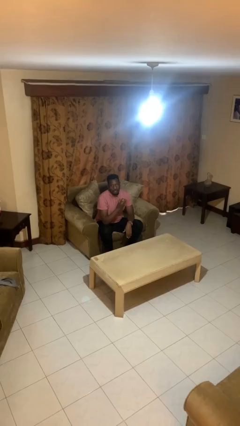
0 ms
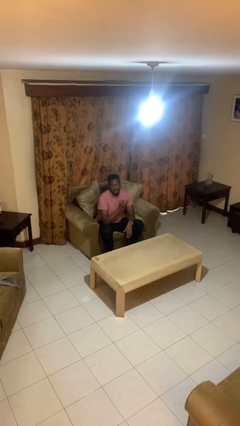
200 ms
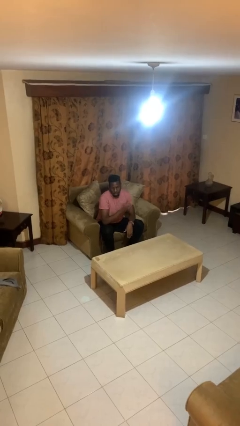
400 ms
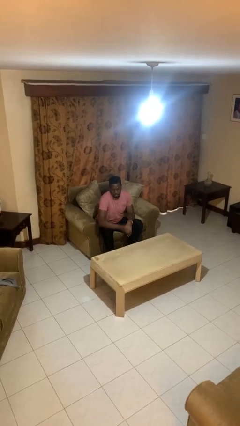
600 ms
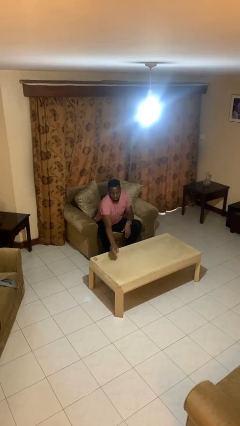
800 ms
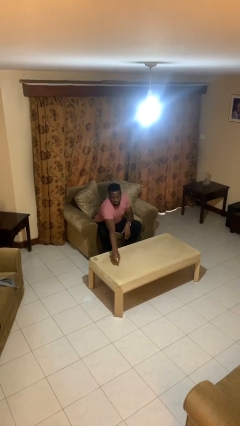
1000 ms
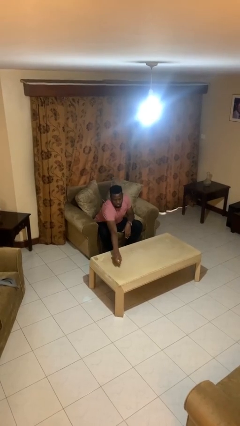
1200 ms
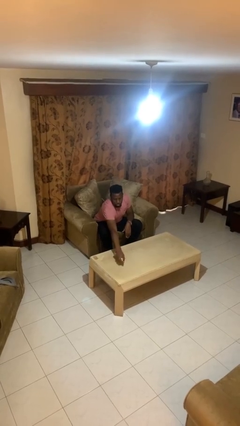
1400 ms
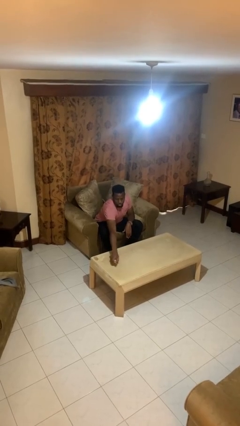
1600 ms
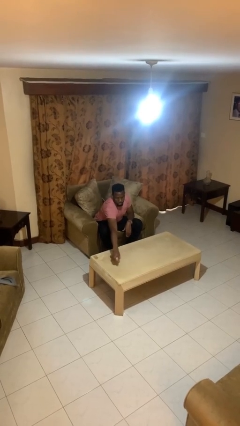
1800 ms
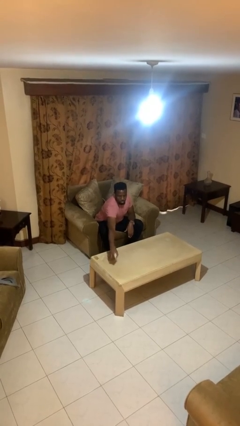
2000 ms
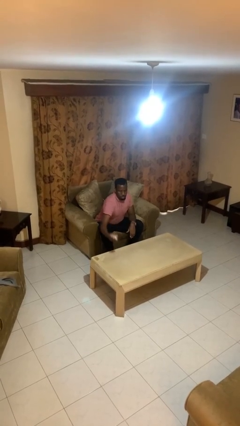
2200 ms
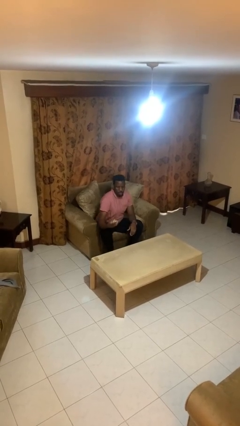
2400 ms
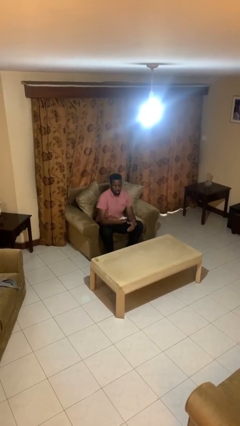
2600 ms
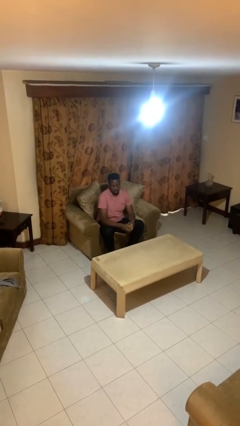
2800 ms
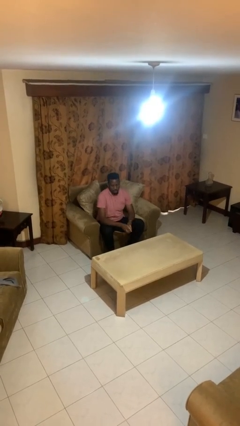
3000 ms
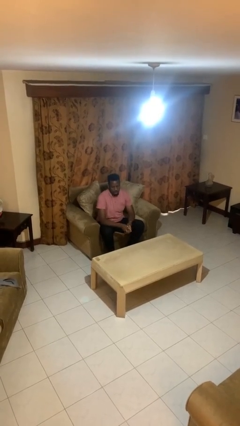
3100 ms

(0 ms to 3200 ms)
person sprays from bottle

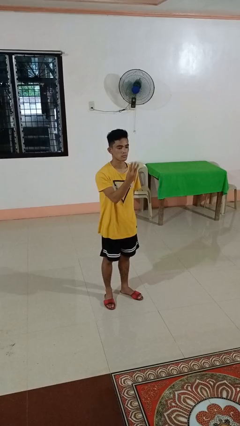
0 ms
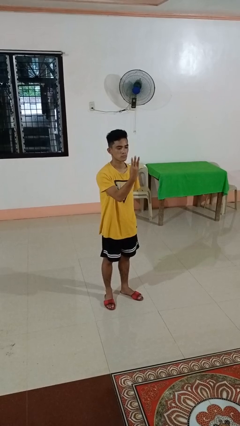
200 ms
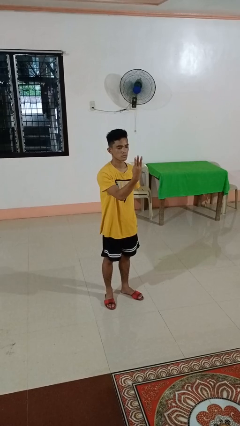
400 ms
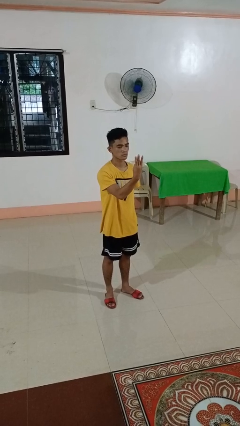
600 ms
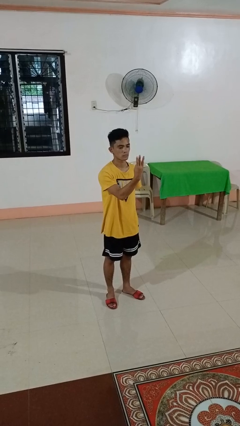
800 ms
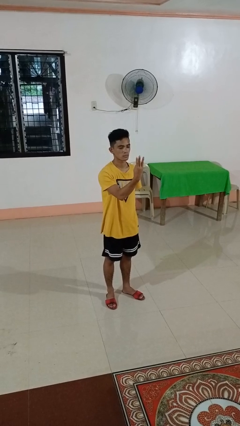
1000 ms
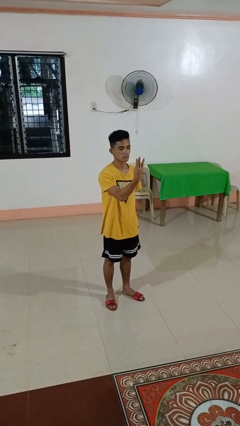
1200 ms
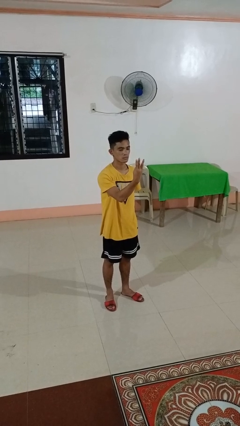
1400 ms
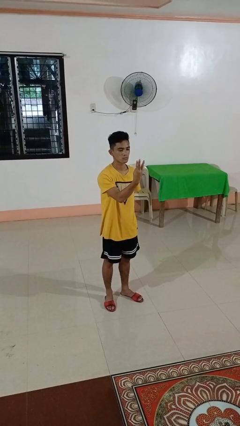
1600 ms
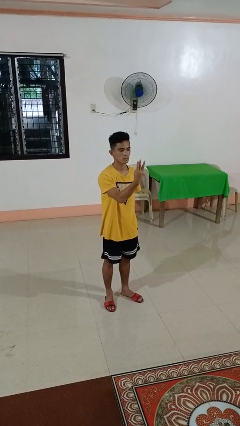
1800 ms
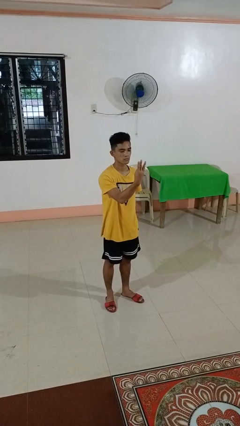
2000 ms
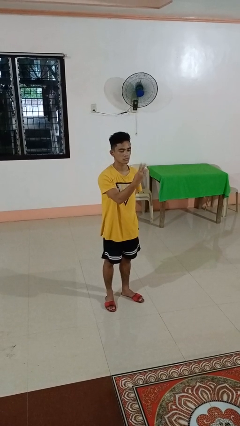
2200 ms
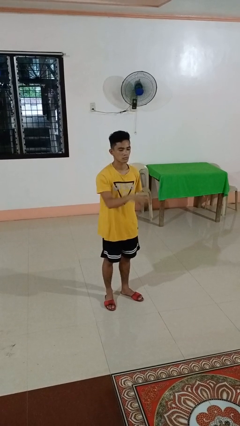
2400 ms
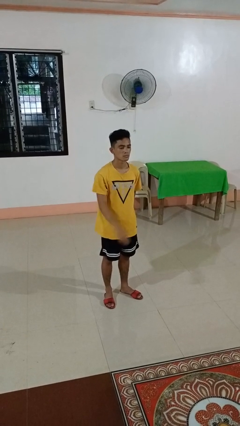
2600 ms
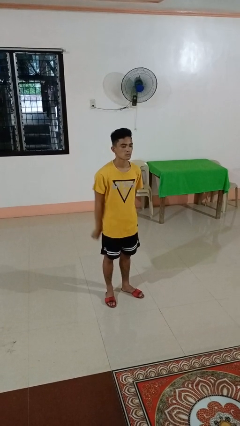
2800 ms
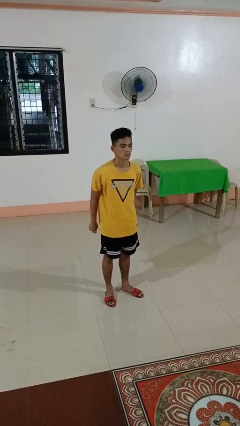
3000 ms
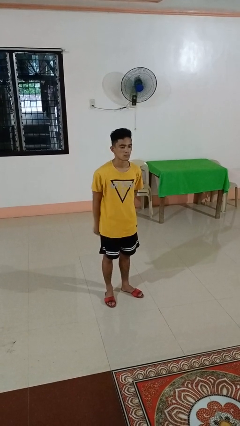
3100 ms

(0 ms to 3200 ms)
person gestures number three

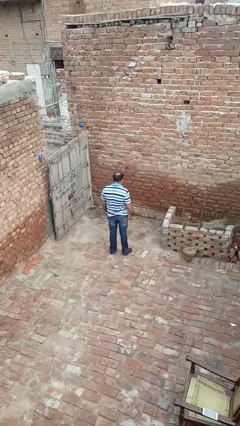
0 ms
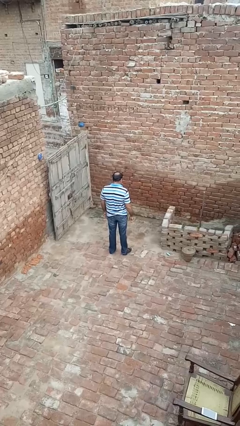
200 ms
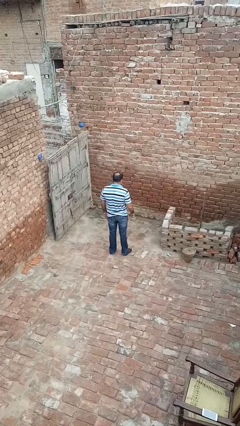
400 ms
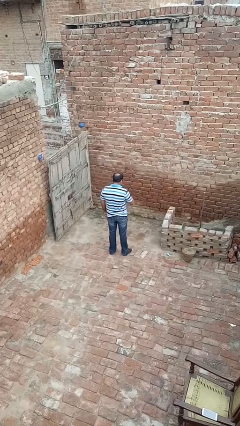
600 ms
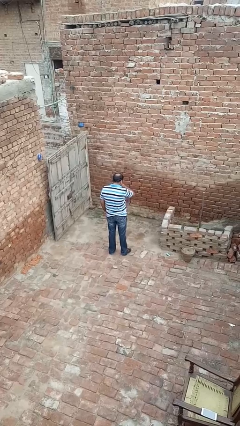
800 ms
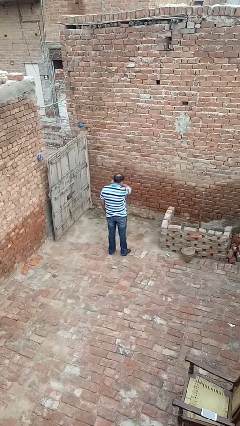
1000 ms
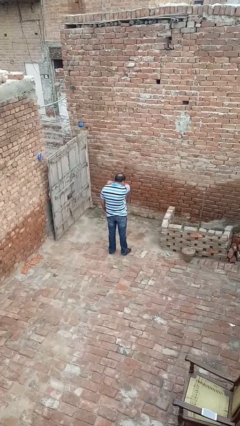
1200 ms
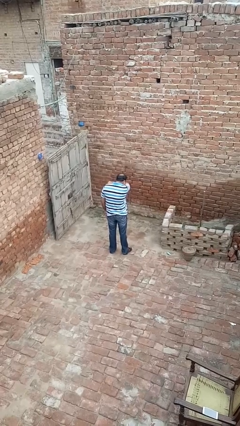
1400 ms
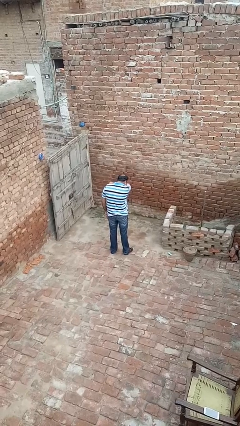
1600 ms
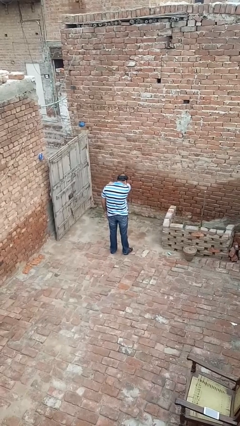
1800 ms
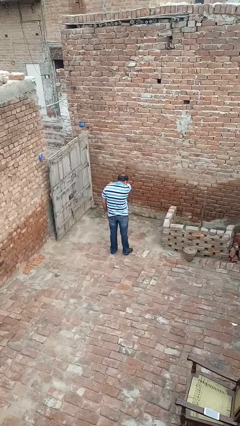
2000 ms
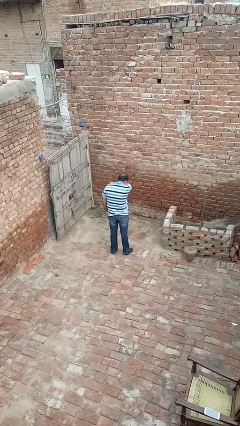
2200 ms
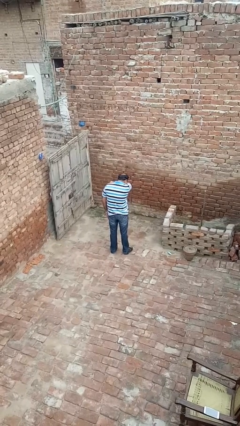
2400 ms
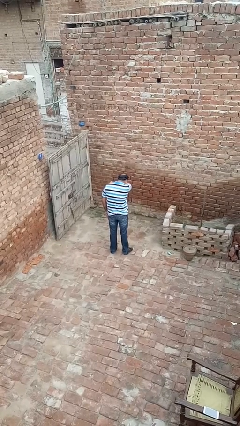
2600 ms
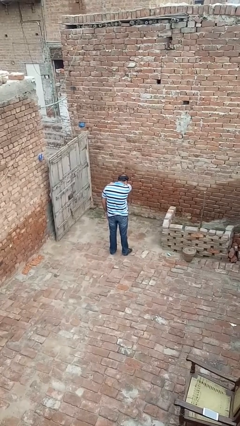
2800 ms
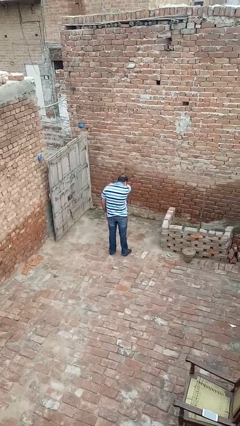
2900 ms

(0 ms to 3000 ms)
person sneezes into arm

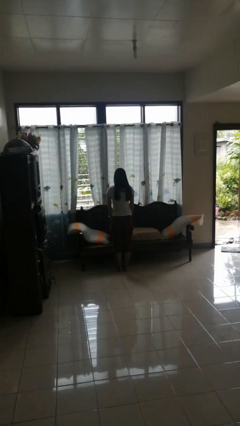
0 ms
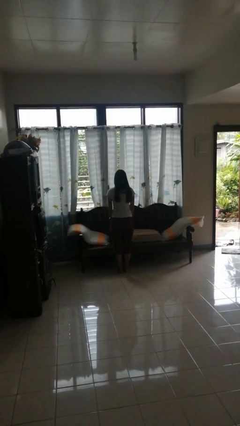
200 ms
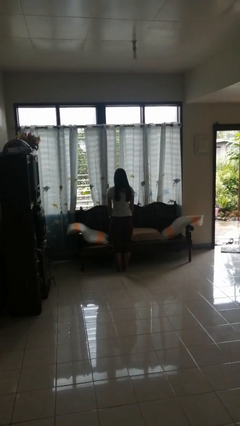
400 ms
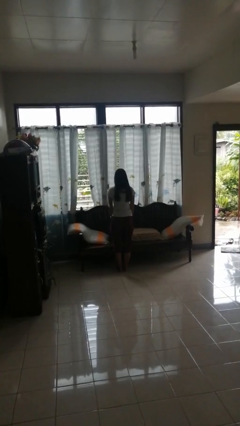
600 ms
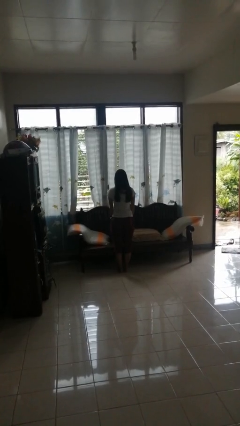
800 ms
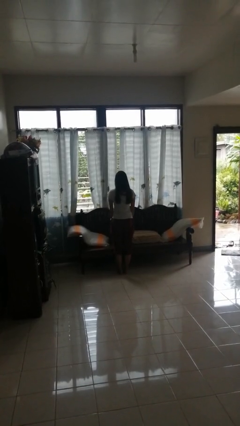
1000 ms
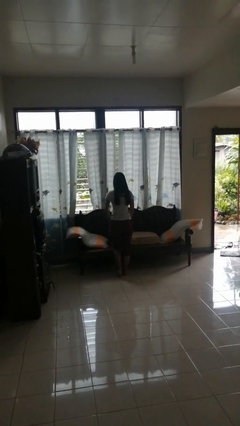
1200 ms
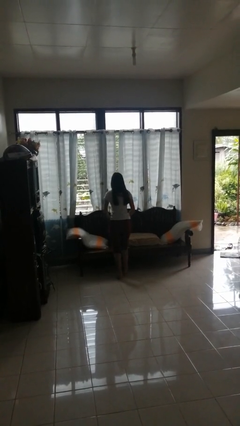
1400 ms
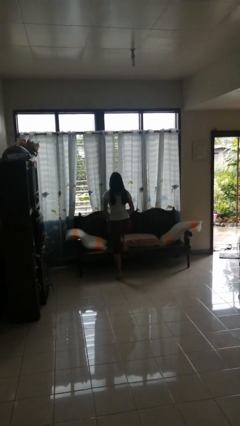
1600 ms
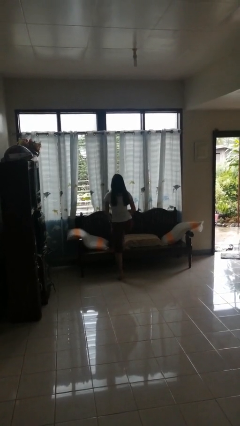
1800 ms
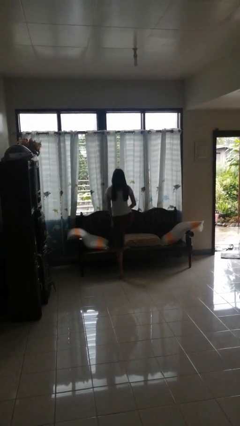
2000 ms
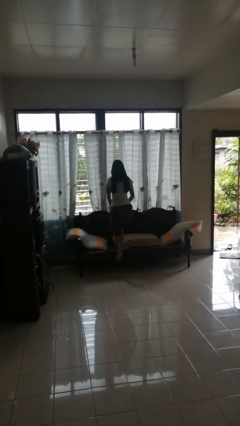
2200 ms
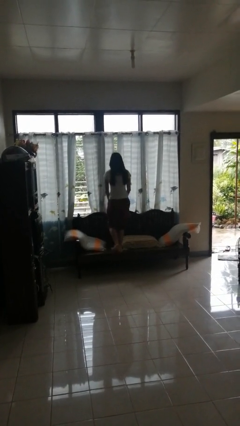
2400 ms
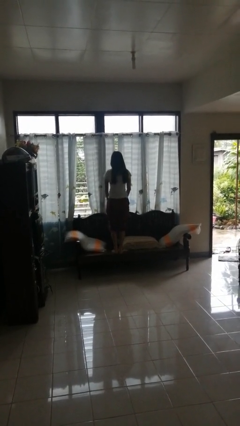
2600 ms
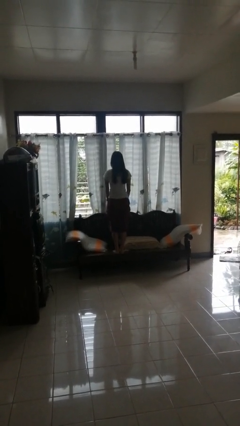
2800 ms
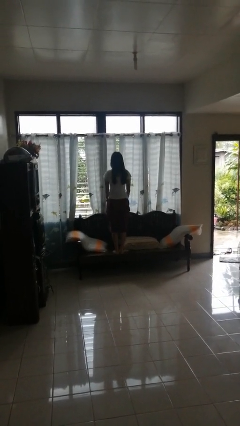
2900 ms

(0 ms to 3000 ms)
person climbs on couch

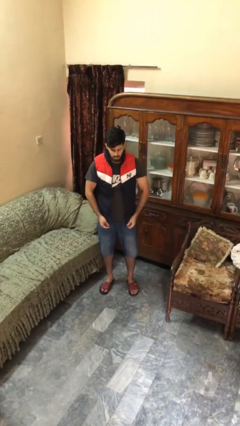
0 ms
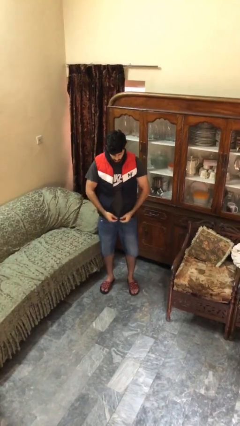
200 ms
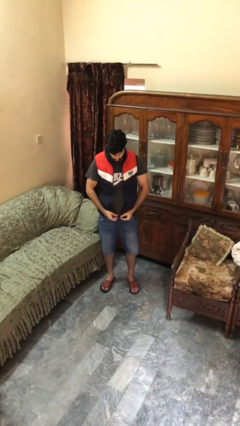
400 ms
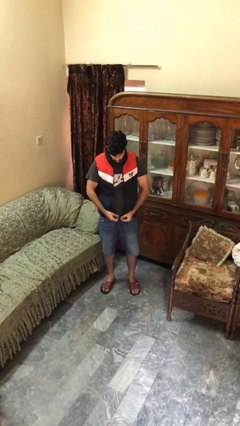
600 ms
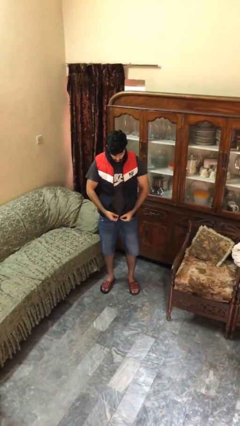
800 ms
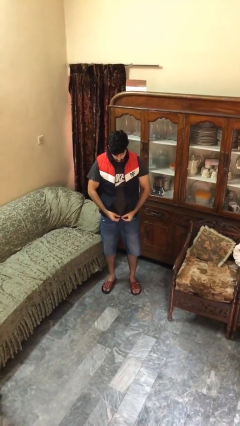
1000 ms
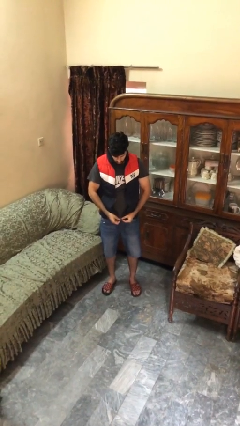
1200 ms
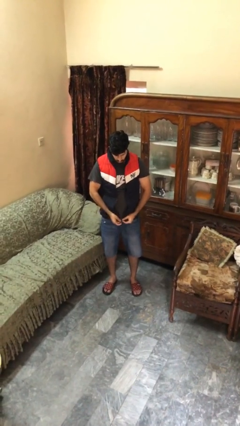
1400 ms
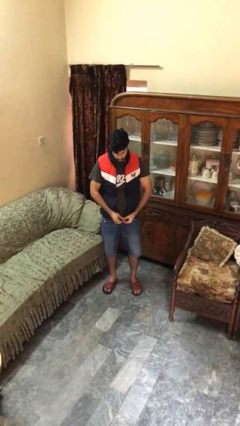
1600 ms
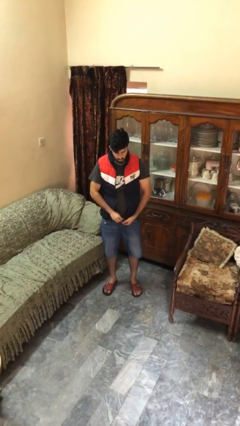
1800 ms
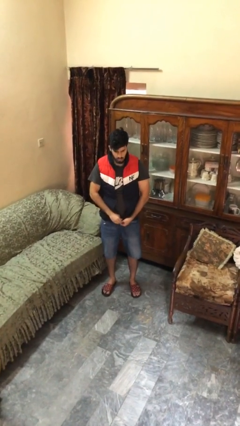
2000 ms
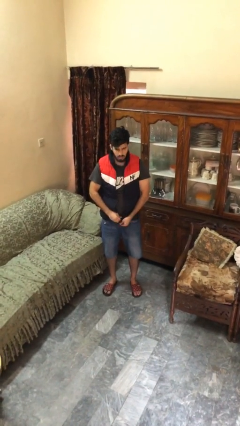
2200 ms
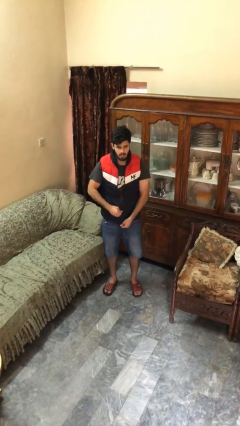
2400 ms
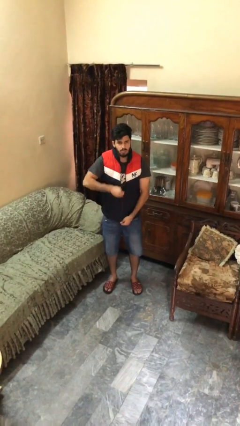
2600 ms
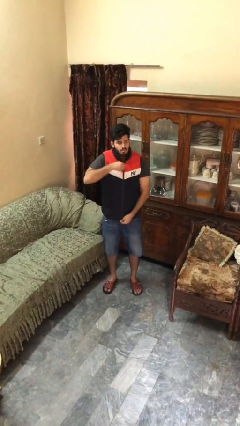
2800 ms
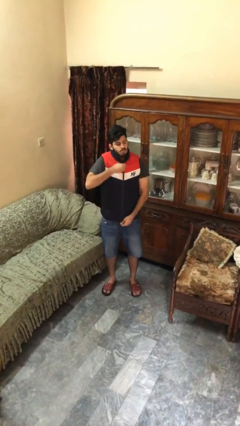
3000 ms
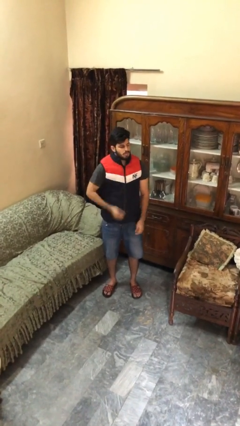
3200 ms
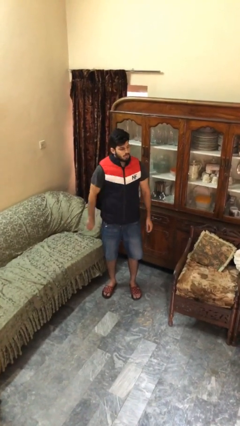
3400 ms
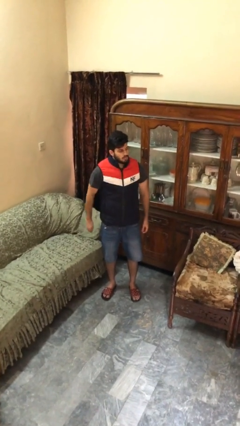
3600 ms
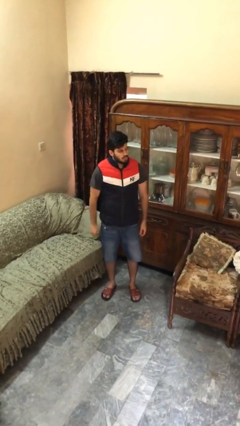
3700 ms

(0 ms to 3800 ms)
person zips up jacket

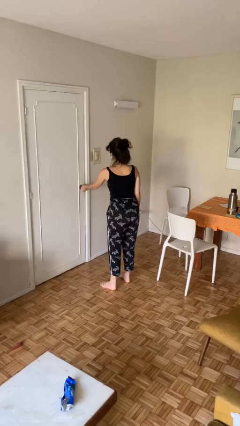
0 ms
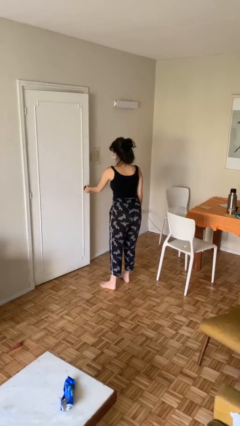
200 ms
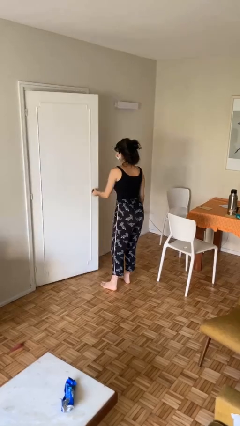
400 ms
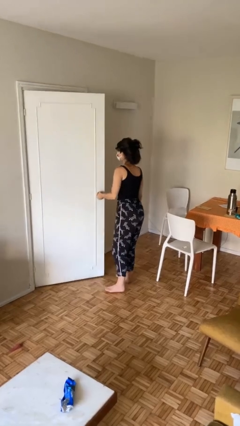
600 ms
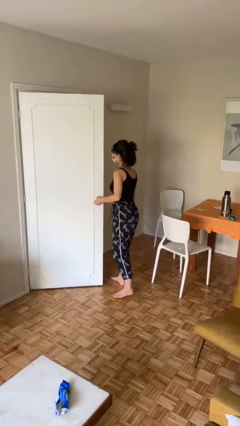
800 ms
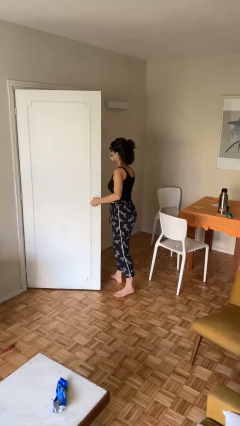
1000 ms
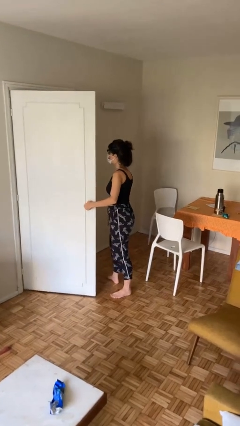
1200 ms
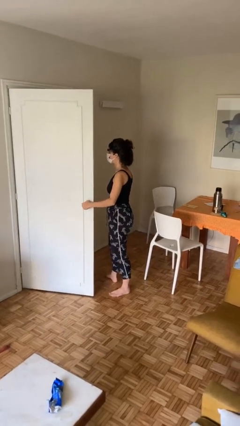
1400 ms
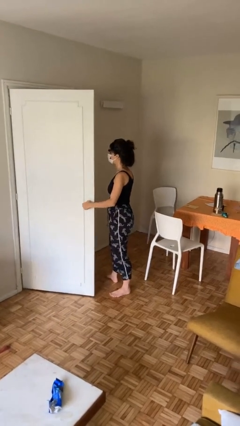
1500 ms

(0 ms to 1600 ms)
person opens facility door
